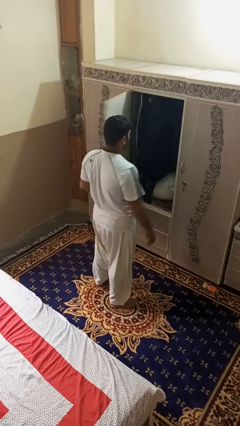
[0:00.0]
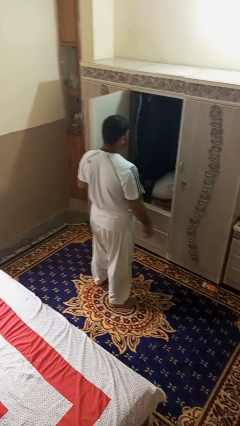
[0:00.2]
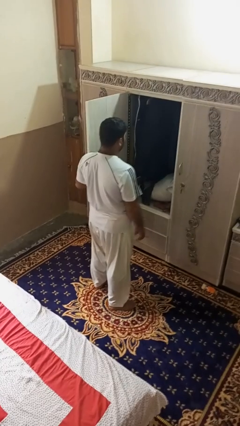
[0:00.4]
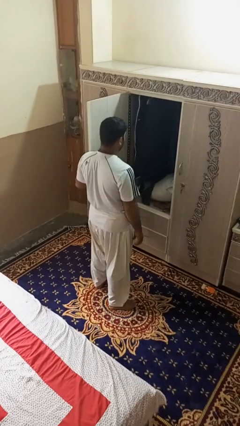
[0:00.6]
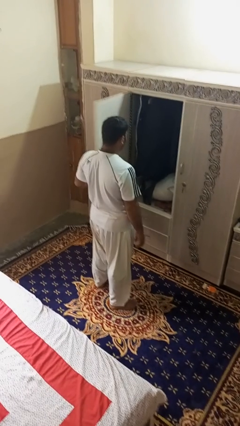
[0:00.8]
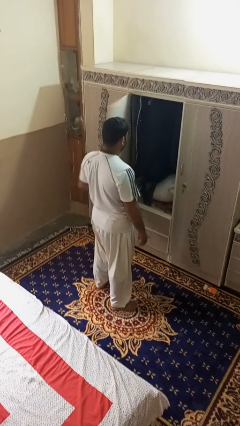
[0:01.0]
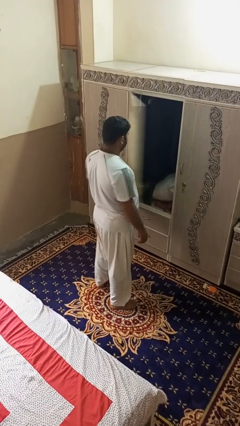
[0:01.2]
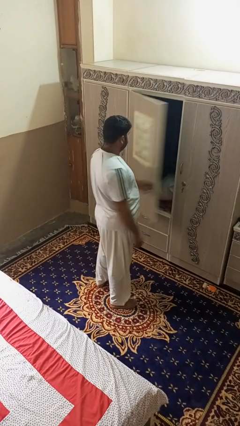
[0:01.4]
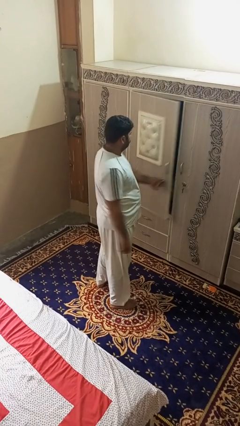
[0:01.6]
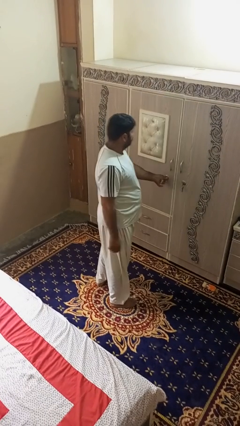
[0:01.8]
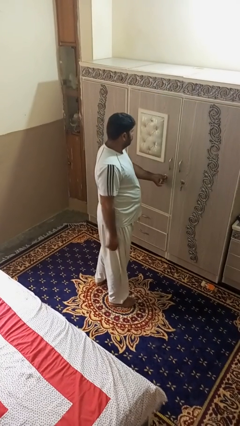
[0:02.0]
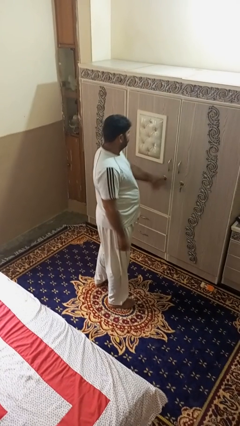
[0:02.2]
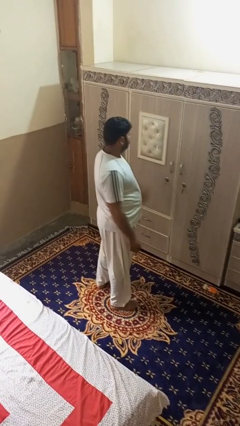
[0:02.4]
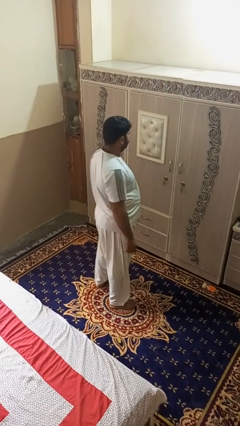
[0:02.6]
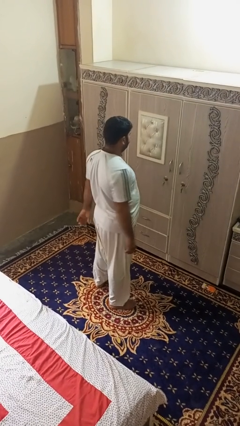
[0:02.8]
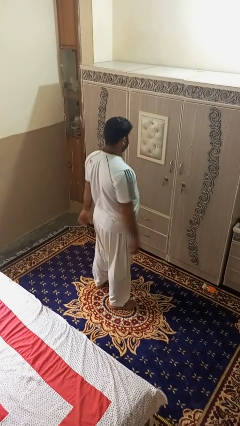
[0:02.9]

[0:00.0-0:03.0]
person closes dresser drawer

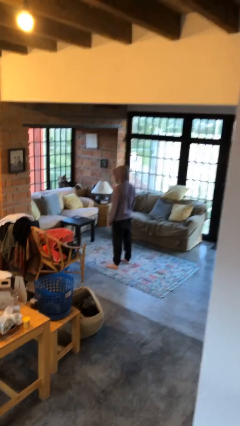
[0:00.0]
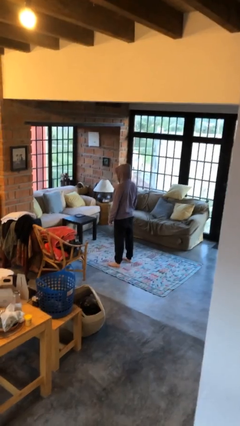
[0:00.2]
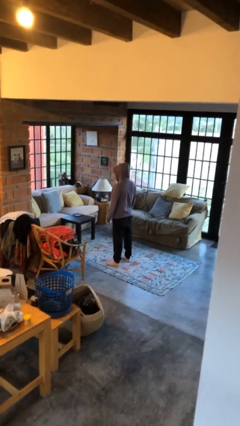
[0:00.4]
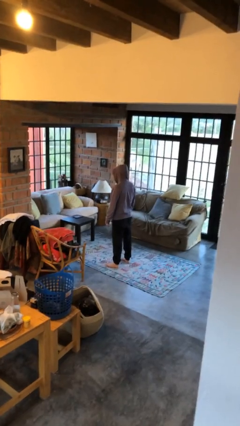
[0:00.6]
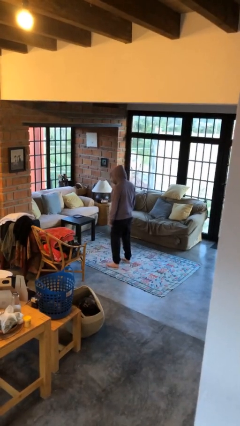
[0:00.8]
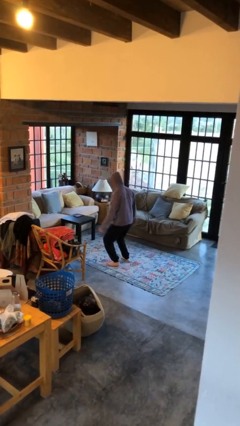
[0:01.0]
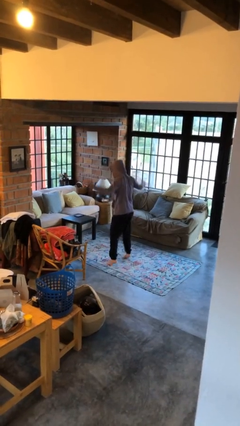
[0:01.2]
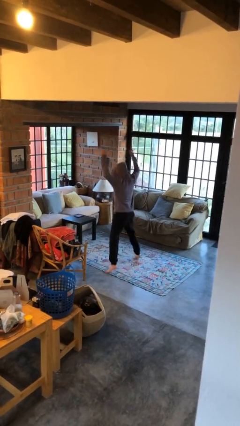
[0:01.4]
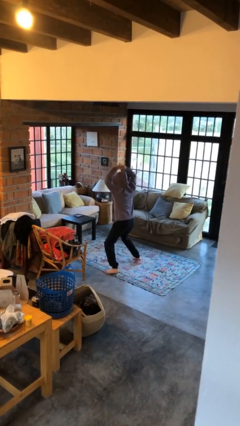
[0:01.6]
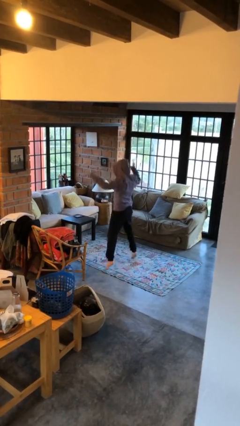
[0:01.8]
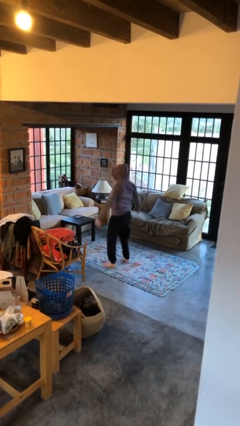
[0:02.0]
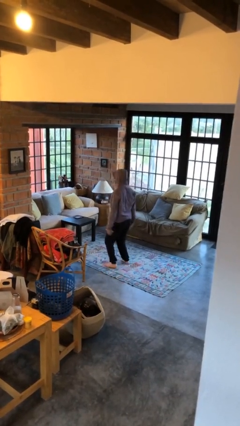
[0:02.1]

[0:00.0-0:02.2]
person exercises with jumping jacks

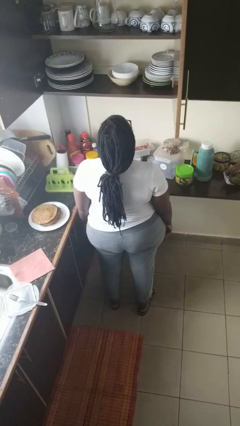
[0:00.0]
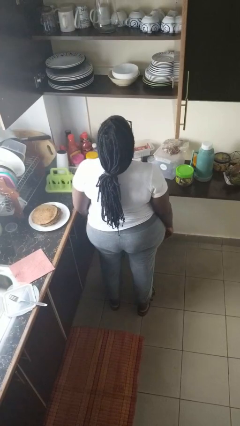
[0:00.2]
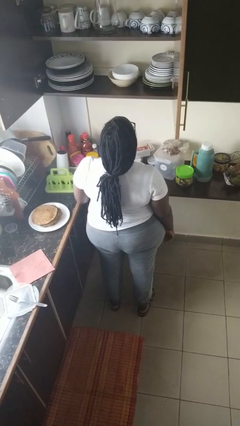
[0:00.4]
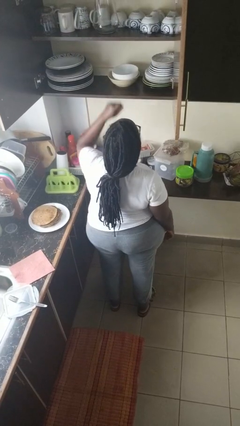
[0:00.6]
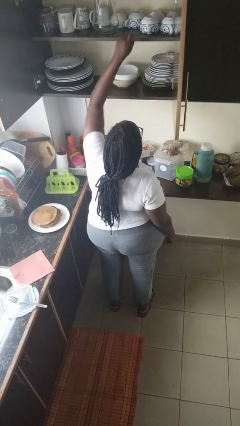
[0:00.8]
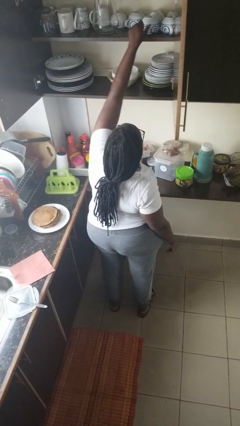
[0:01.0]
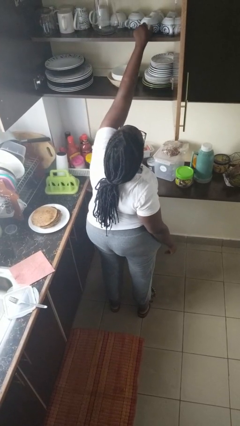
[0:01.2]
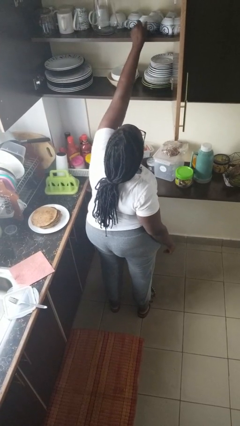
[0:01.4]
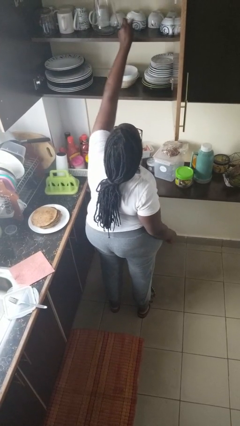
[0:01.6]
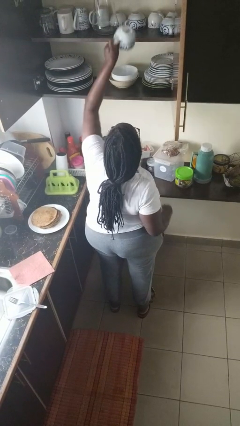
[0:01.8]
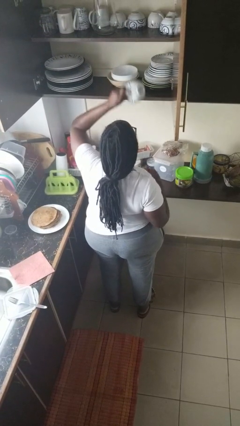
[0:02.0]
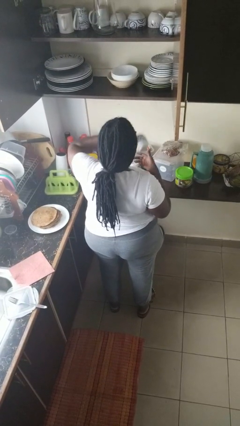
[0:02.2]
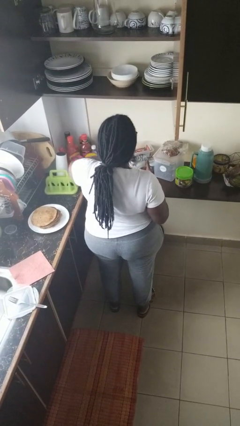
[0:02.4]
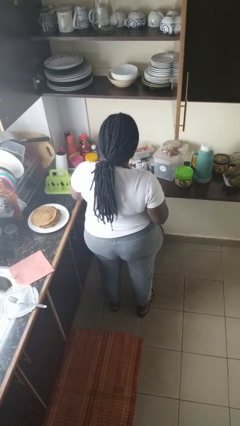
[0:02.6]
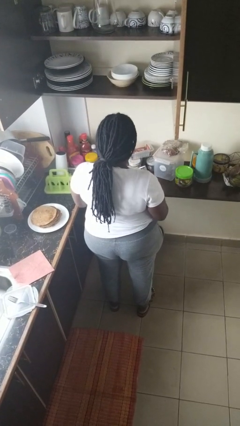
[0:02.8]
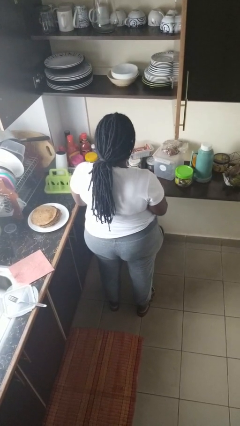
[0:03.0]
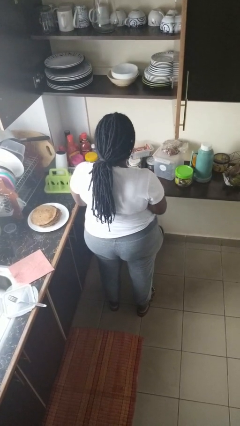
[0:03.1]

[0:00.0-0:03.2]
person takes object from cabinet

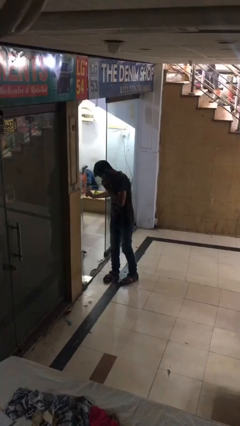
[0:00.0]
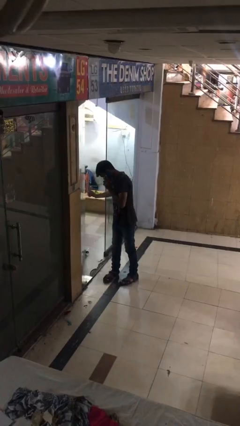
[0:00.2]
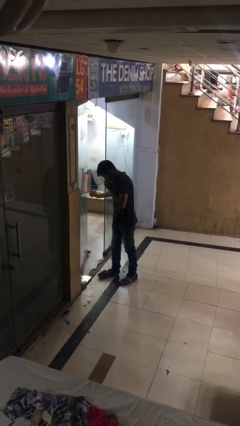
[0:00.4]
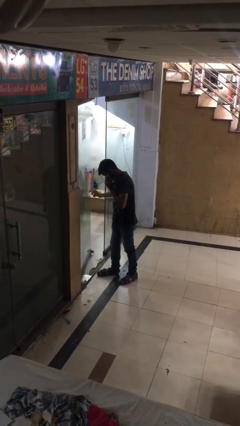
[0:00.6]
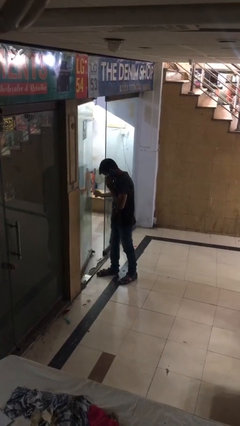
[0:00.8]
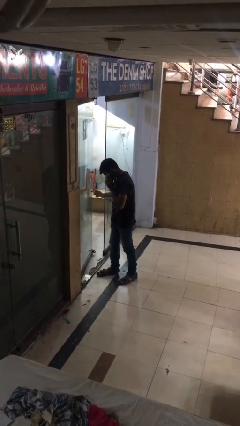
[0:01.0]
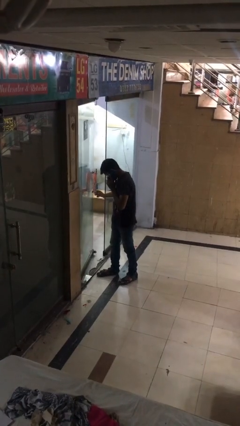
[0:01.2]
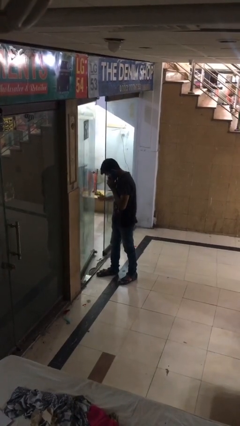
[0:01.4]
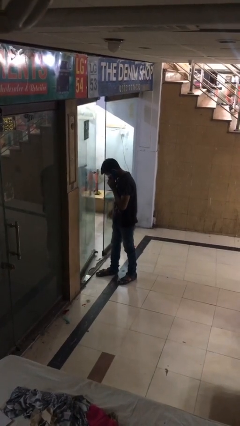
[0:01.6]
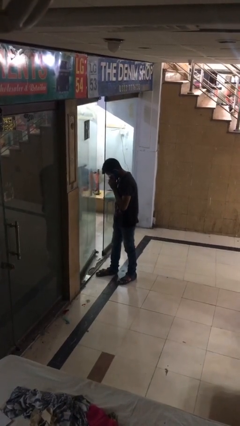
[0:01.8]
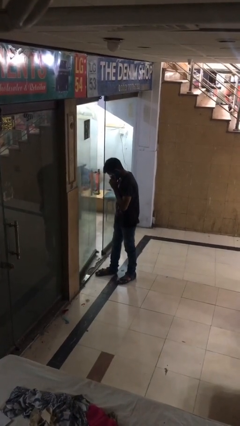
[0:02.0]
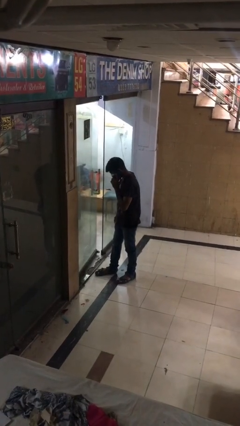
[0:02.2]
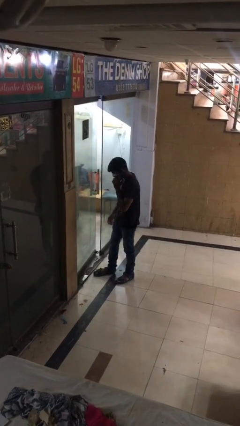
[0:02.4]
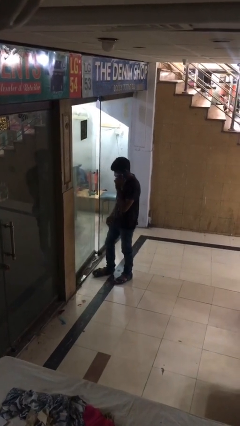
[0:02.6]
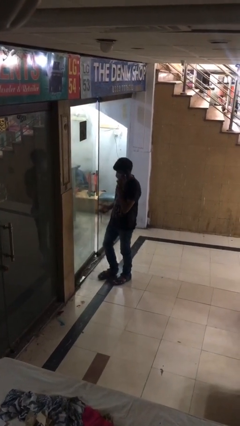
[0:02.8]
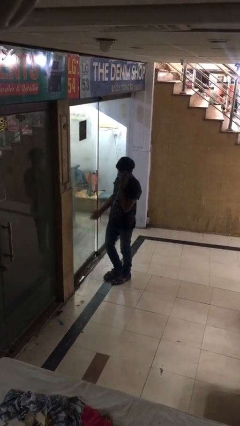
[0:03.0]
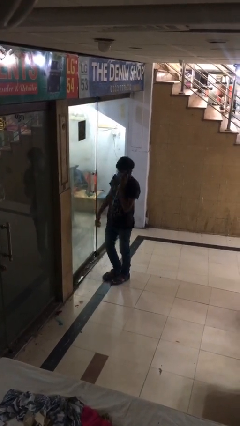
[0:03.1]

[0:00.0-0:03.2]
person closes facility door

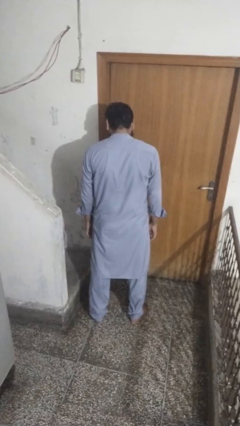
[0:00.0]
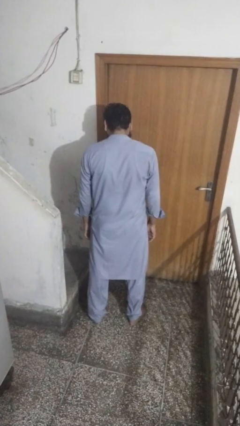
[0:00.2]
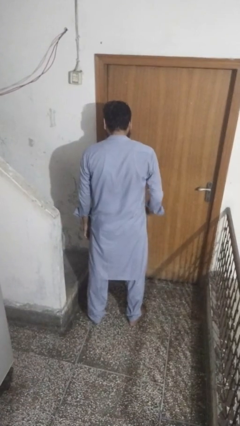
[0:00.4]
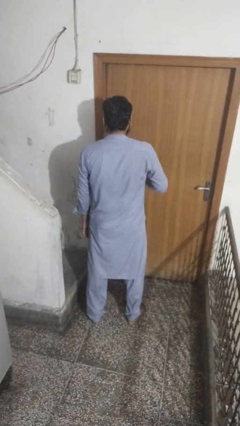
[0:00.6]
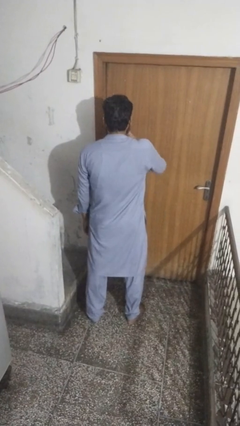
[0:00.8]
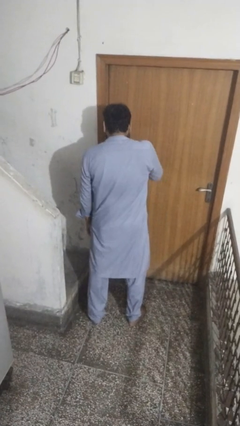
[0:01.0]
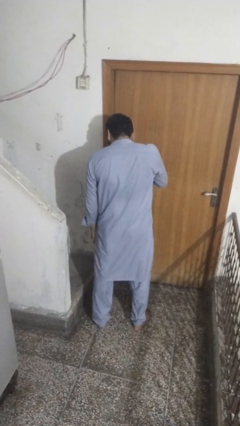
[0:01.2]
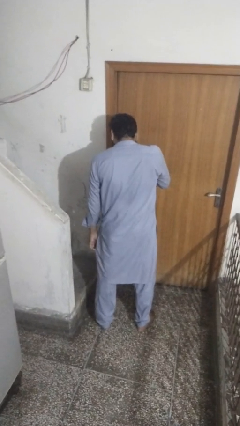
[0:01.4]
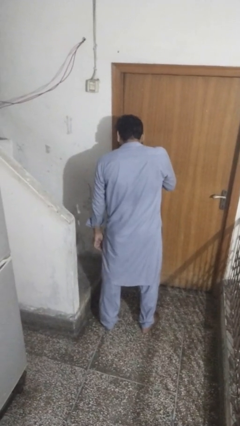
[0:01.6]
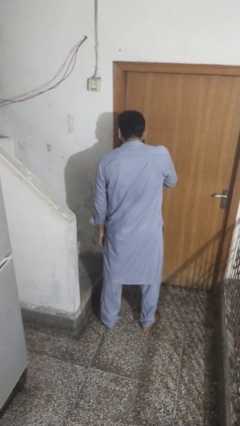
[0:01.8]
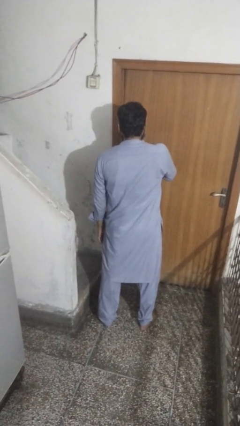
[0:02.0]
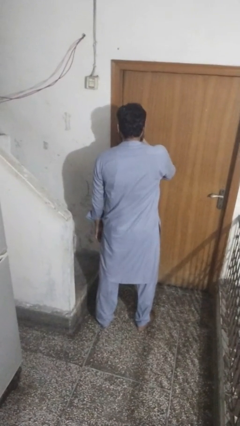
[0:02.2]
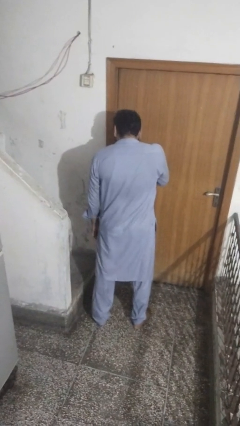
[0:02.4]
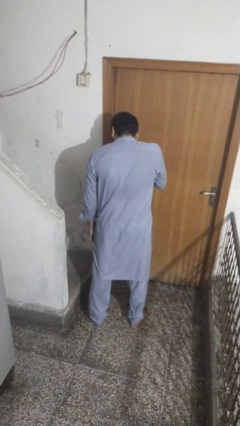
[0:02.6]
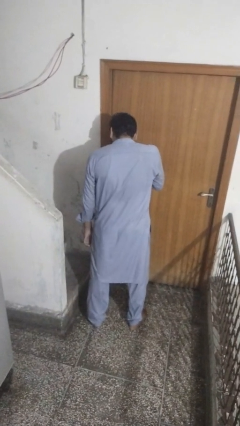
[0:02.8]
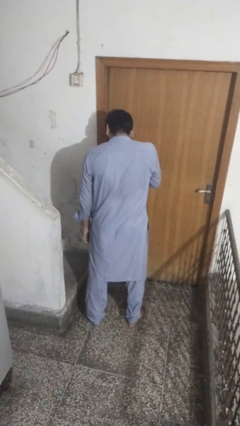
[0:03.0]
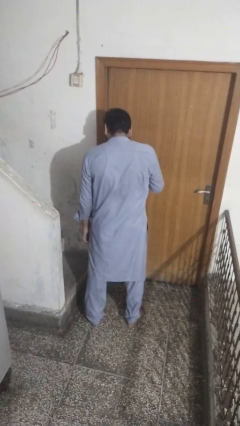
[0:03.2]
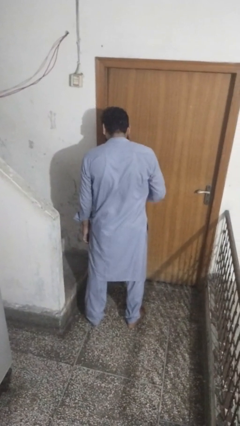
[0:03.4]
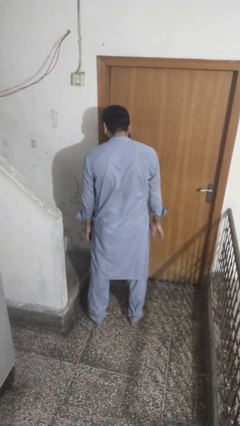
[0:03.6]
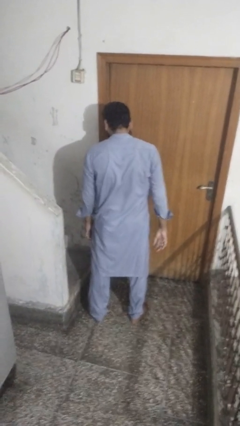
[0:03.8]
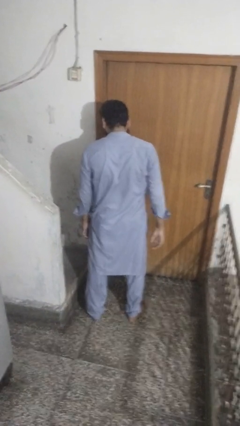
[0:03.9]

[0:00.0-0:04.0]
person sneezes into hand

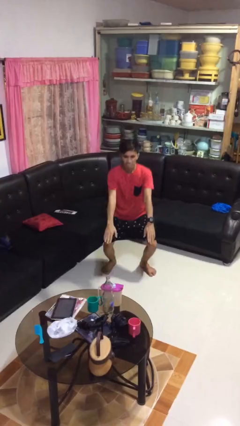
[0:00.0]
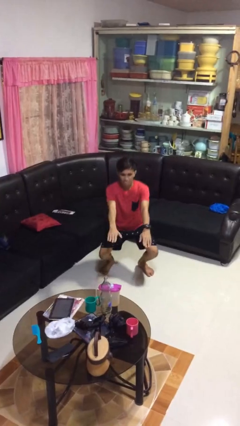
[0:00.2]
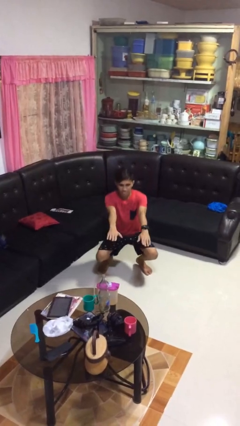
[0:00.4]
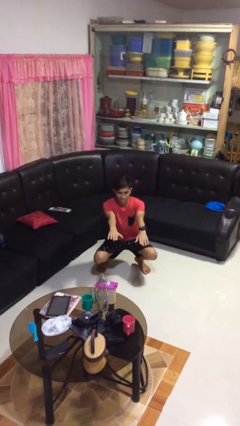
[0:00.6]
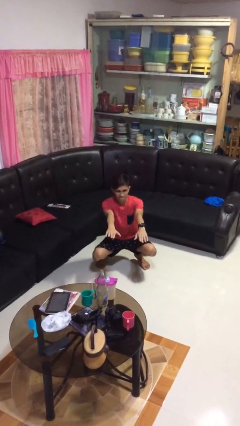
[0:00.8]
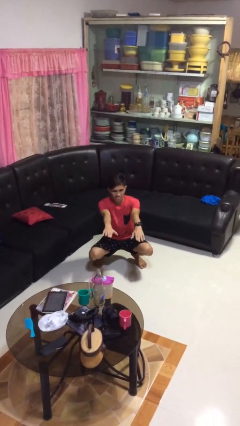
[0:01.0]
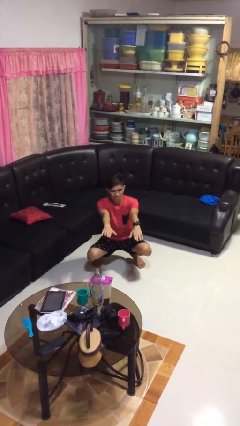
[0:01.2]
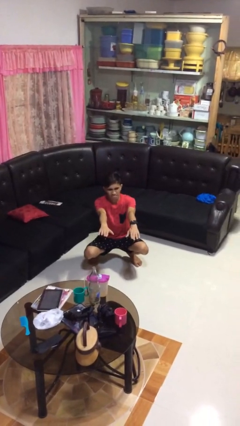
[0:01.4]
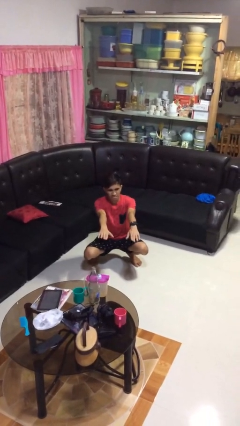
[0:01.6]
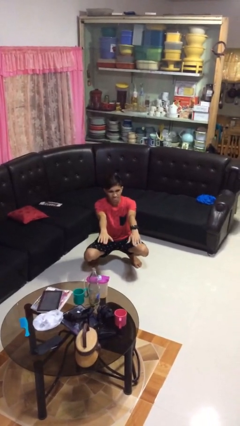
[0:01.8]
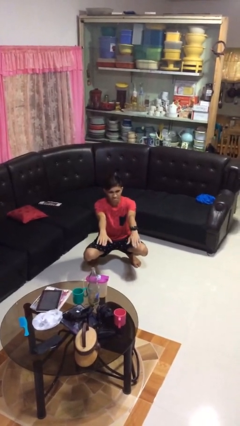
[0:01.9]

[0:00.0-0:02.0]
person squats
